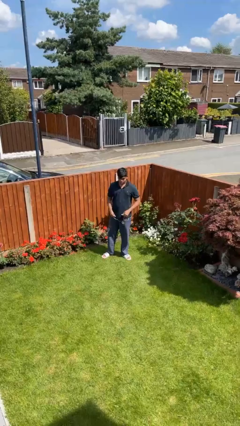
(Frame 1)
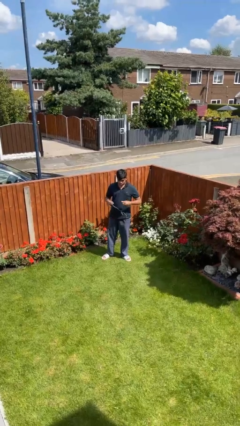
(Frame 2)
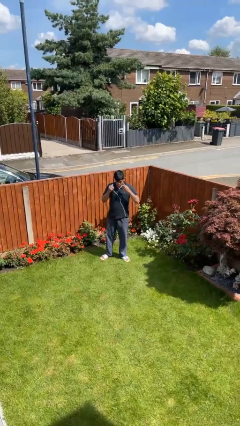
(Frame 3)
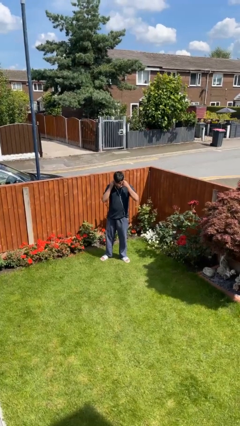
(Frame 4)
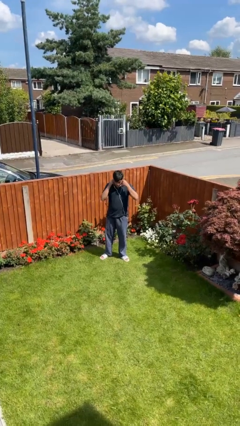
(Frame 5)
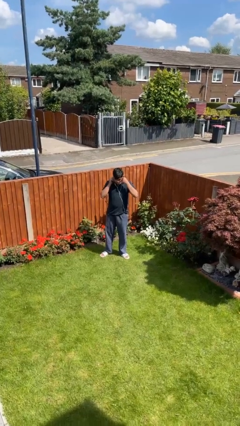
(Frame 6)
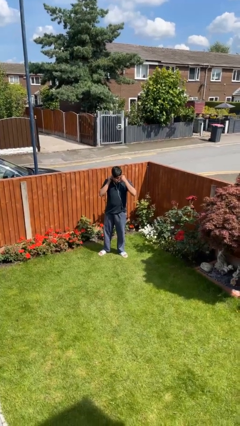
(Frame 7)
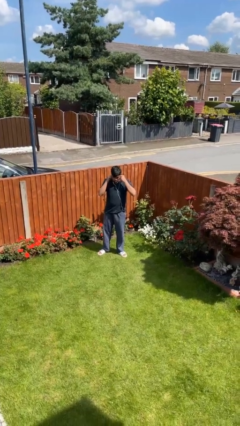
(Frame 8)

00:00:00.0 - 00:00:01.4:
person puts on headphones

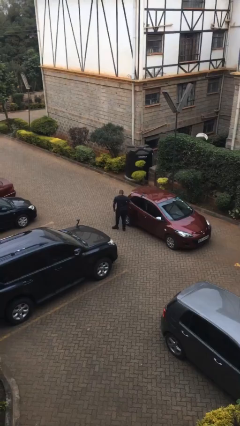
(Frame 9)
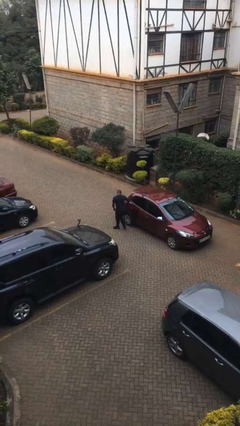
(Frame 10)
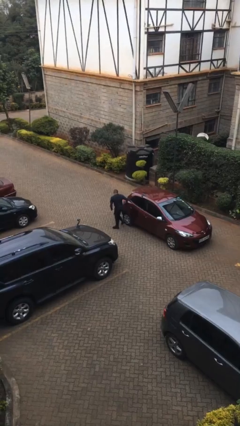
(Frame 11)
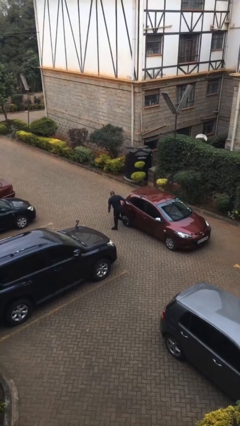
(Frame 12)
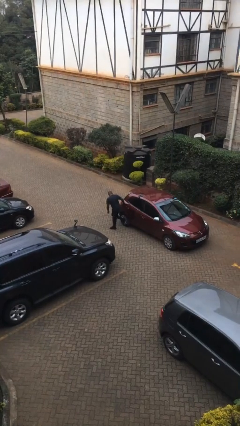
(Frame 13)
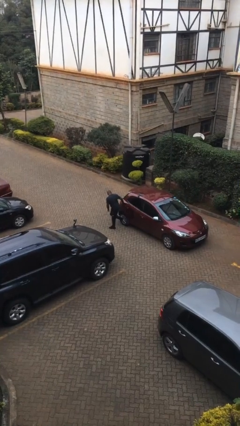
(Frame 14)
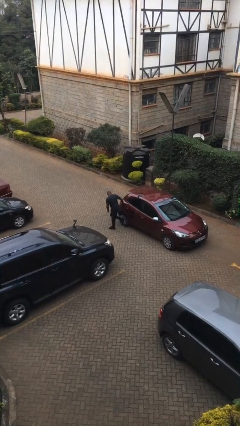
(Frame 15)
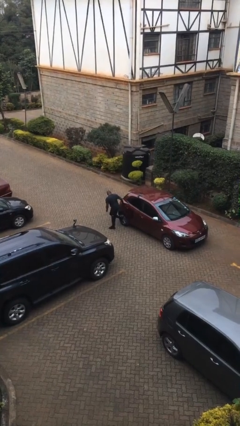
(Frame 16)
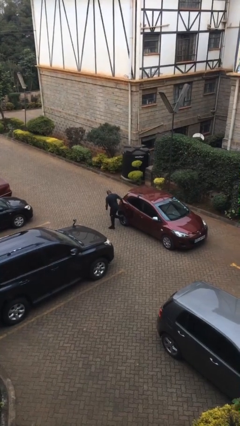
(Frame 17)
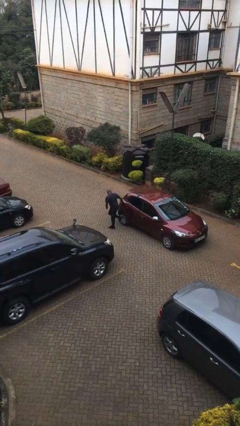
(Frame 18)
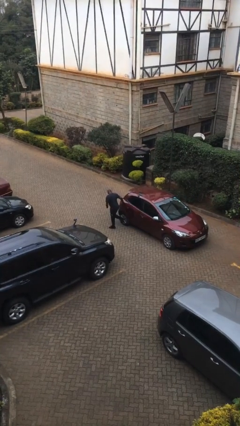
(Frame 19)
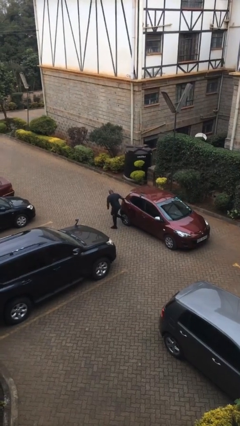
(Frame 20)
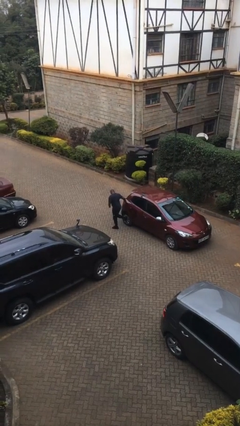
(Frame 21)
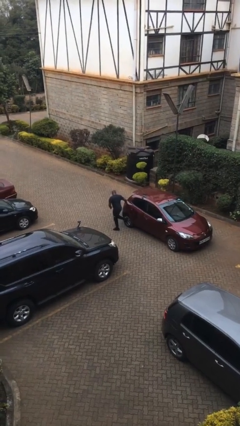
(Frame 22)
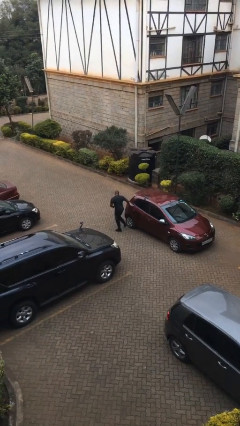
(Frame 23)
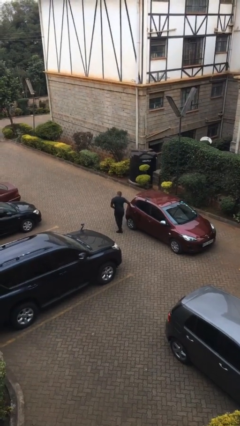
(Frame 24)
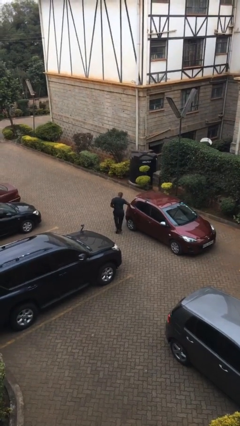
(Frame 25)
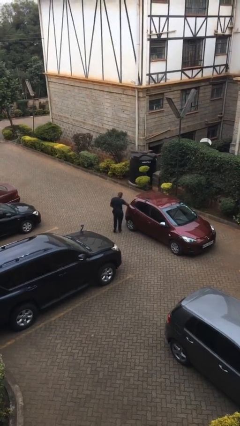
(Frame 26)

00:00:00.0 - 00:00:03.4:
person kicks car tires

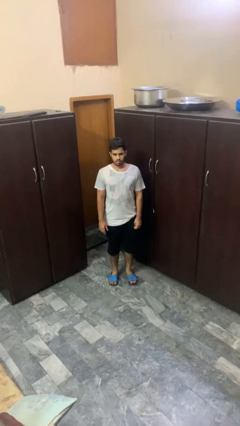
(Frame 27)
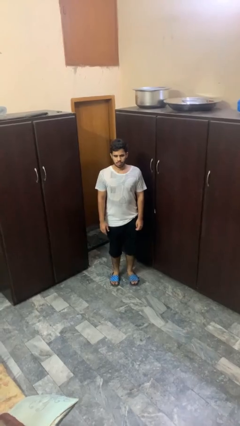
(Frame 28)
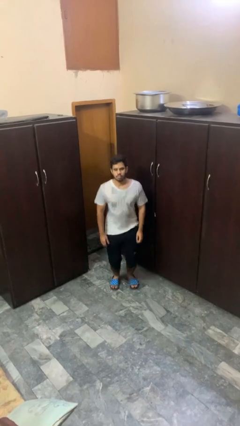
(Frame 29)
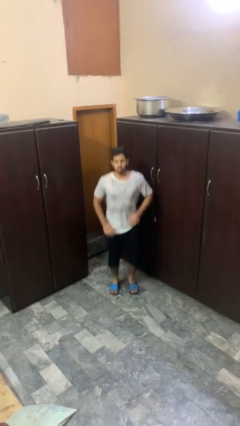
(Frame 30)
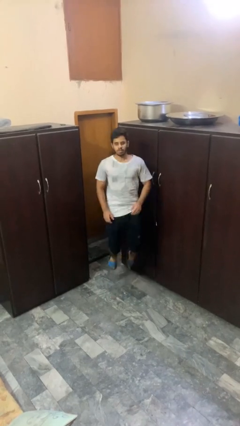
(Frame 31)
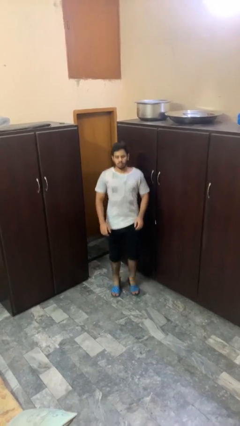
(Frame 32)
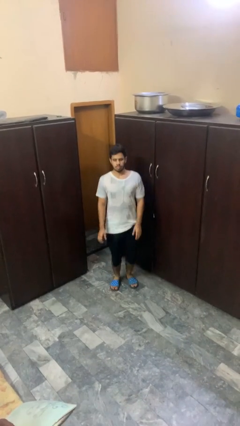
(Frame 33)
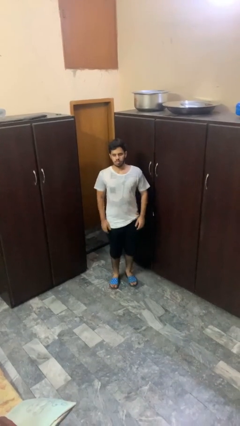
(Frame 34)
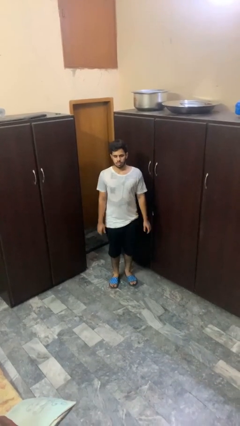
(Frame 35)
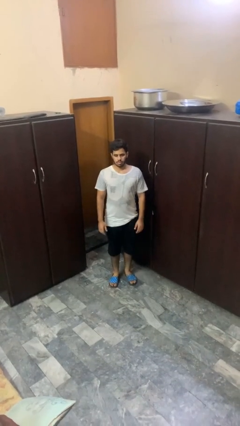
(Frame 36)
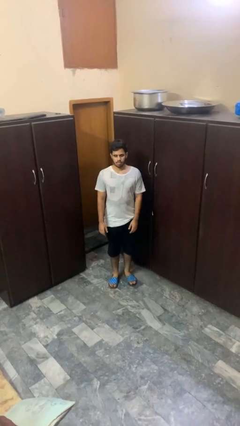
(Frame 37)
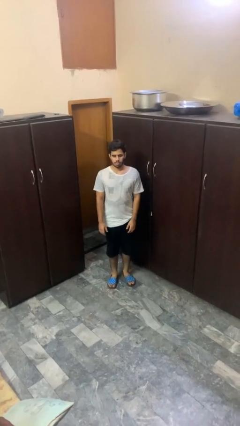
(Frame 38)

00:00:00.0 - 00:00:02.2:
person jumps

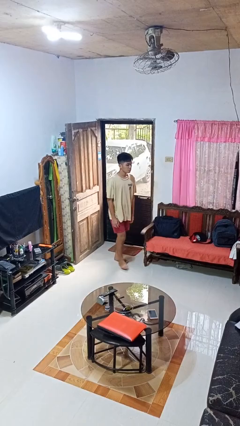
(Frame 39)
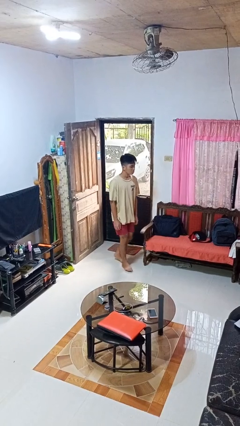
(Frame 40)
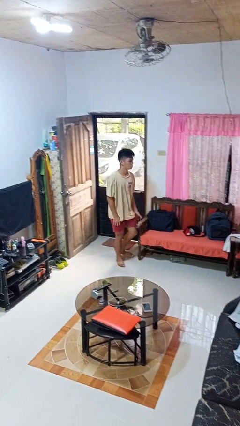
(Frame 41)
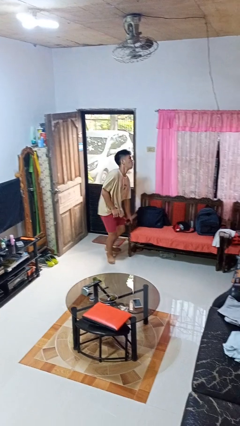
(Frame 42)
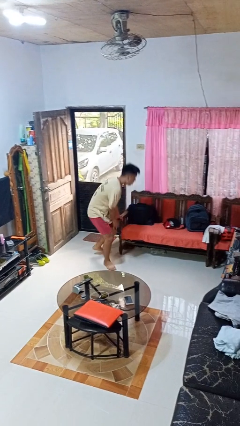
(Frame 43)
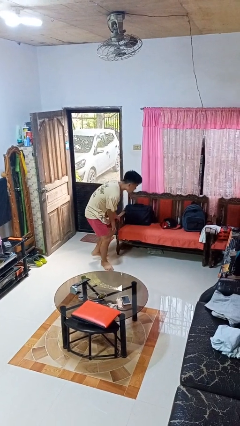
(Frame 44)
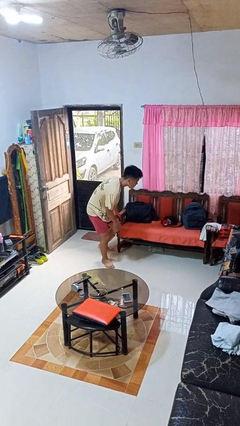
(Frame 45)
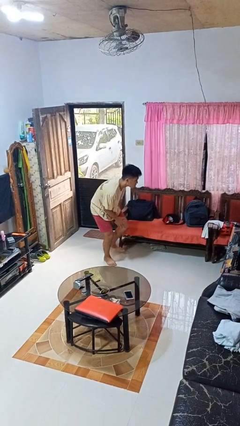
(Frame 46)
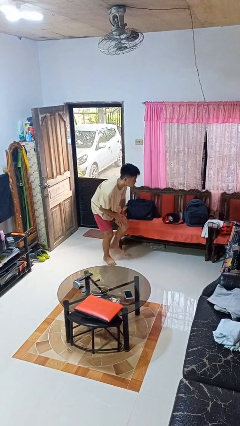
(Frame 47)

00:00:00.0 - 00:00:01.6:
person trips on object on floor

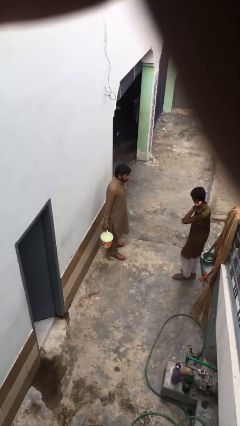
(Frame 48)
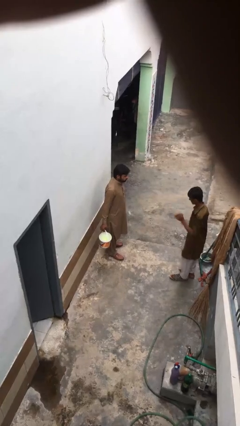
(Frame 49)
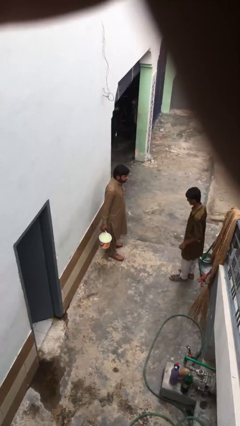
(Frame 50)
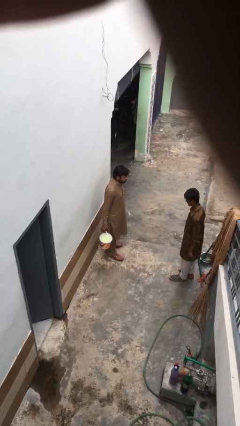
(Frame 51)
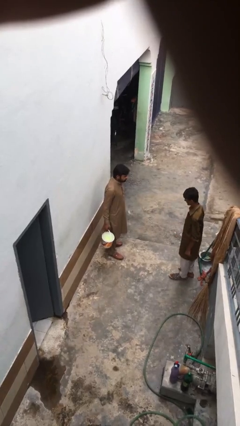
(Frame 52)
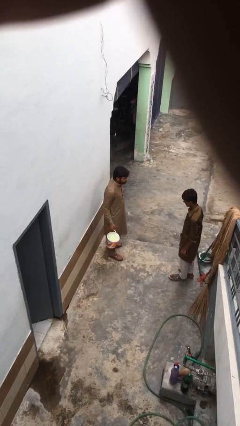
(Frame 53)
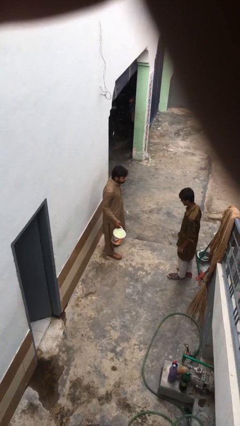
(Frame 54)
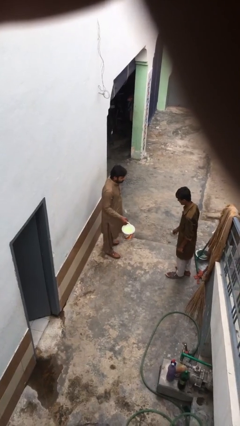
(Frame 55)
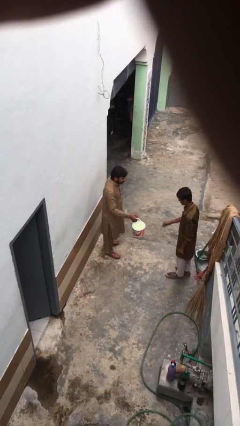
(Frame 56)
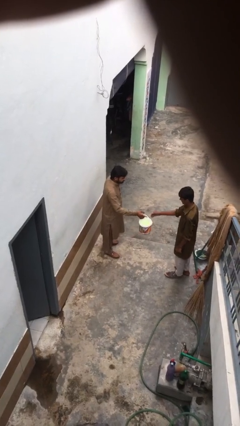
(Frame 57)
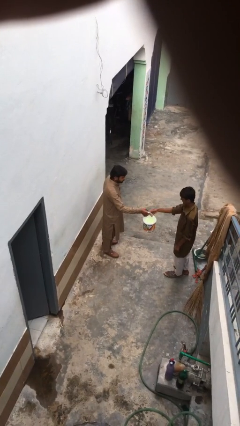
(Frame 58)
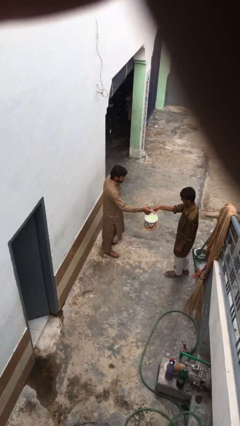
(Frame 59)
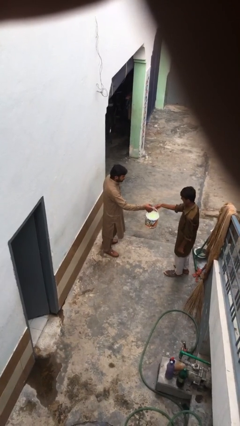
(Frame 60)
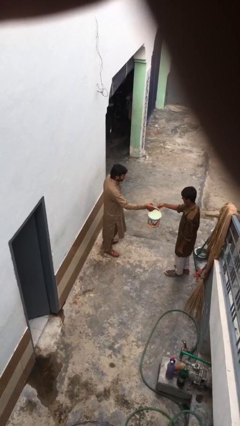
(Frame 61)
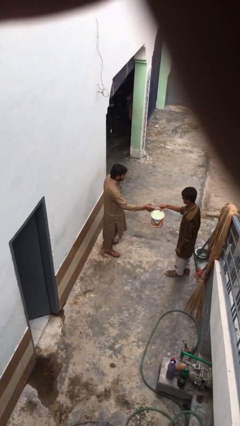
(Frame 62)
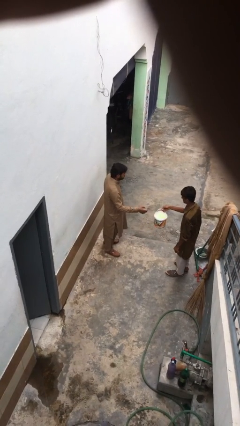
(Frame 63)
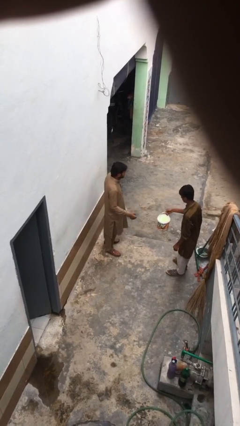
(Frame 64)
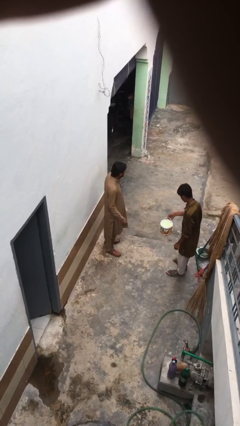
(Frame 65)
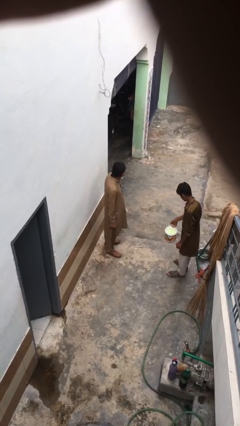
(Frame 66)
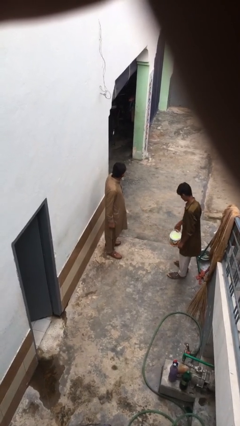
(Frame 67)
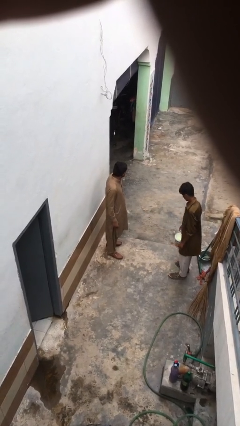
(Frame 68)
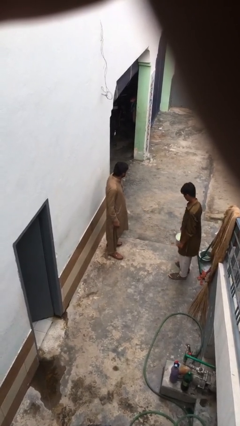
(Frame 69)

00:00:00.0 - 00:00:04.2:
person transfers object to person

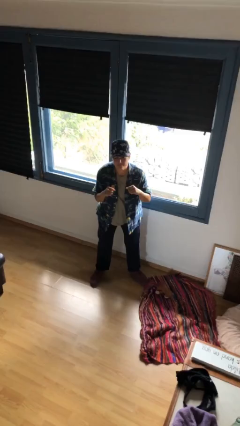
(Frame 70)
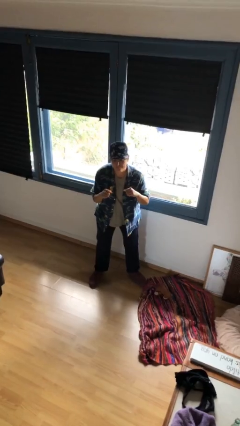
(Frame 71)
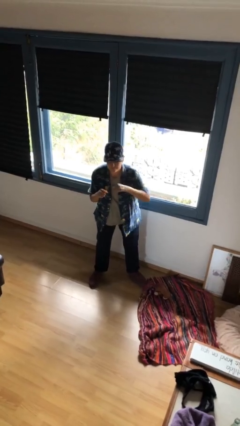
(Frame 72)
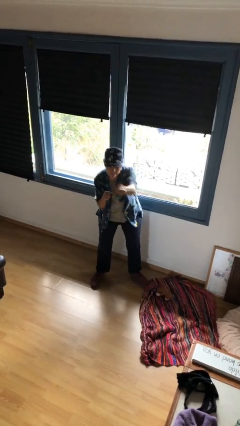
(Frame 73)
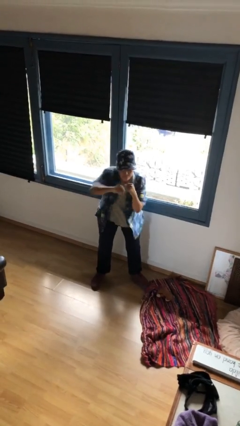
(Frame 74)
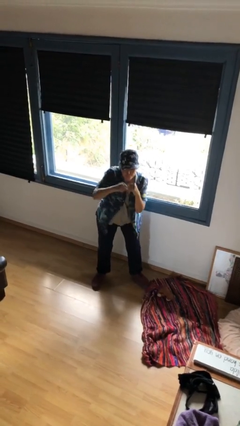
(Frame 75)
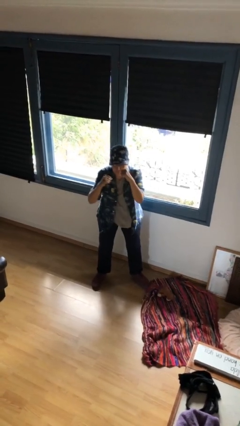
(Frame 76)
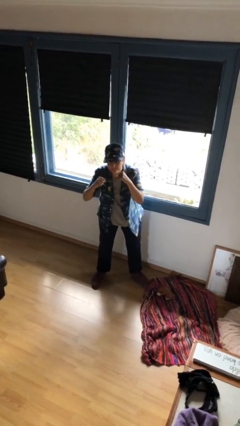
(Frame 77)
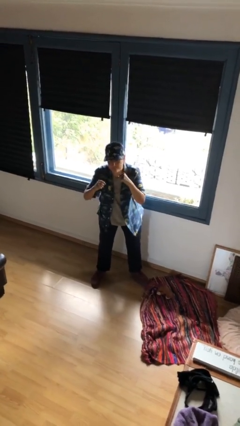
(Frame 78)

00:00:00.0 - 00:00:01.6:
person punches

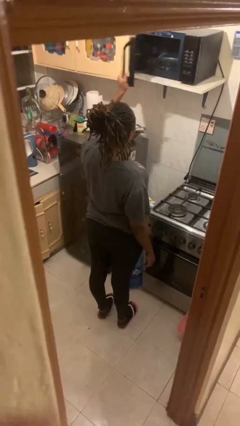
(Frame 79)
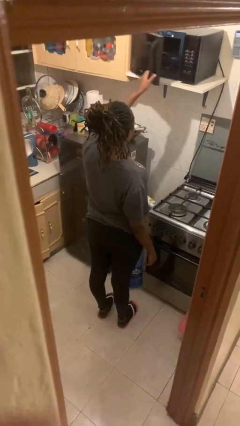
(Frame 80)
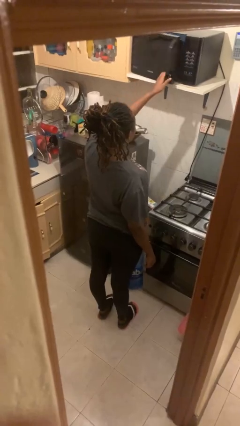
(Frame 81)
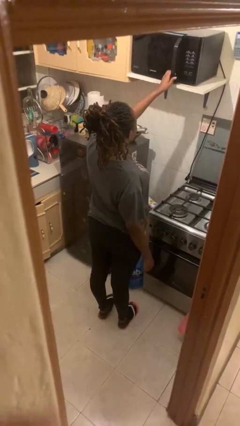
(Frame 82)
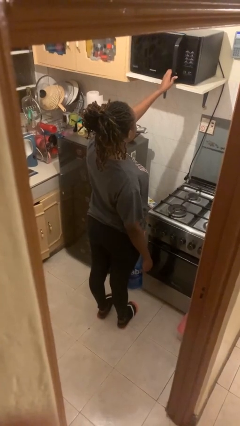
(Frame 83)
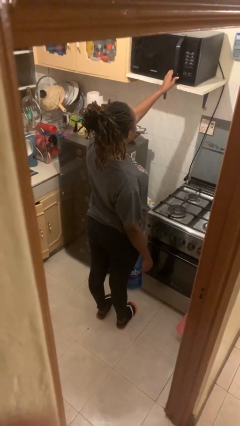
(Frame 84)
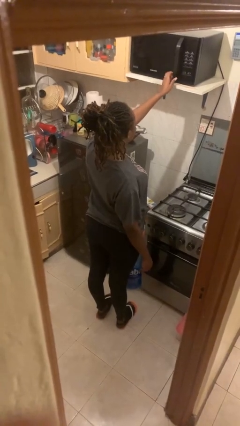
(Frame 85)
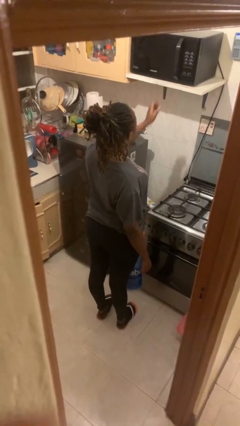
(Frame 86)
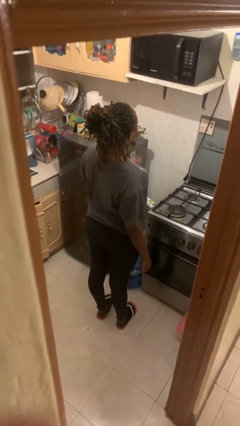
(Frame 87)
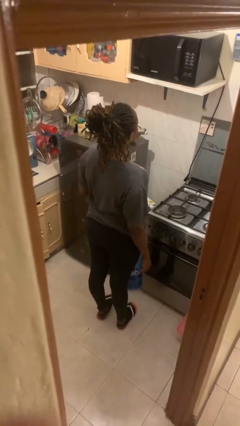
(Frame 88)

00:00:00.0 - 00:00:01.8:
person closes microwave

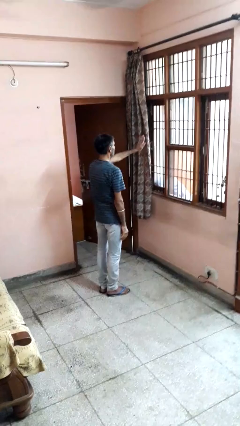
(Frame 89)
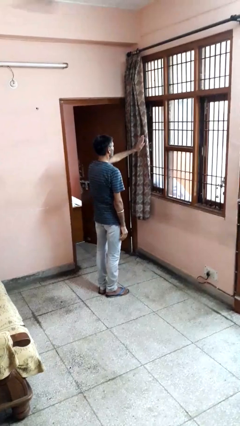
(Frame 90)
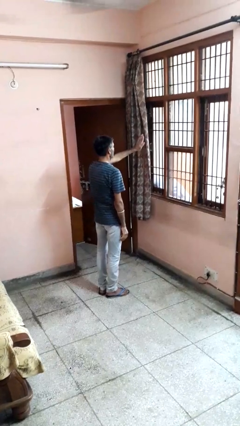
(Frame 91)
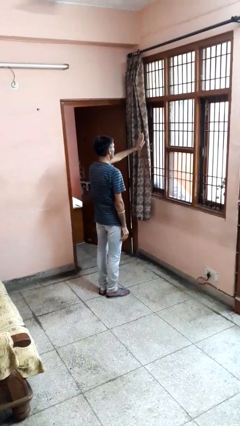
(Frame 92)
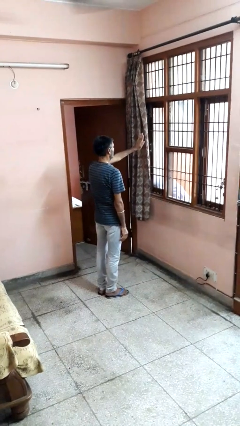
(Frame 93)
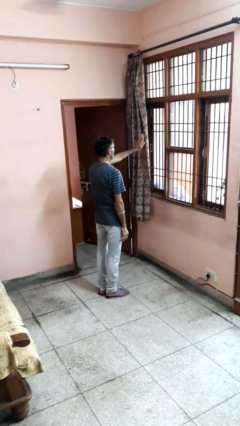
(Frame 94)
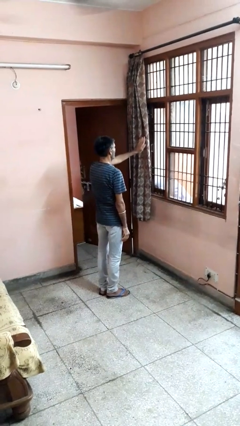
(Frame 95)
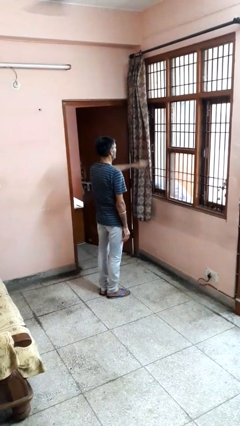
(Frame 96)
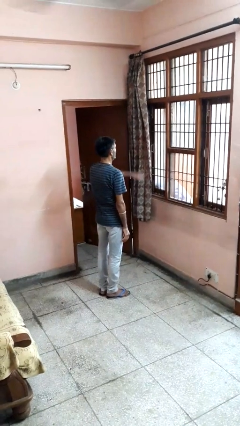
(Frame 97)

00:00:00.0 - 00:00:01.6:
person gestures stop
